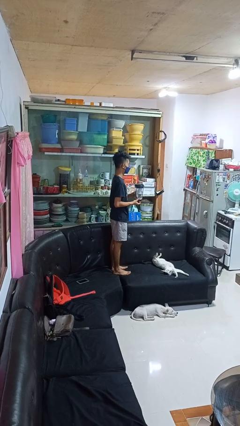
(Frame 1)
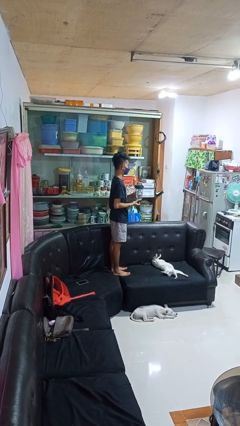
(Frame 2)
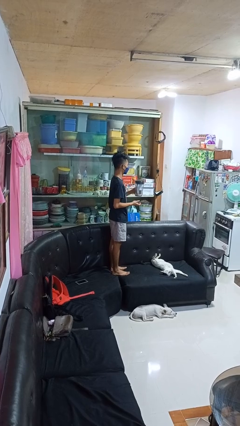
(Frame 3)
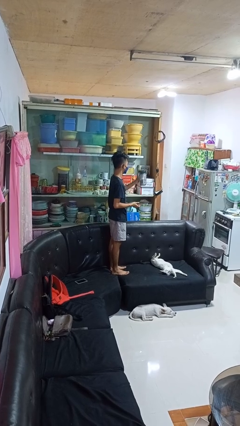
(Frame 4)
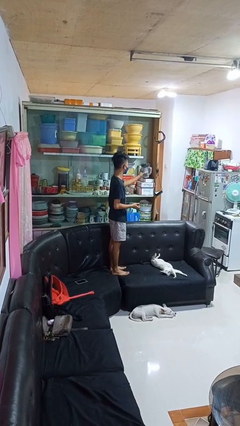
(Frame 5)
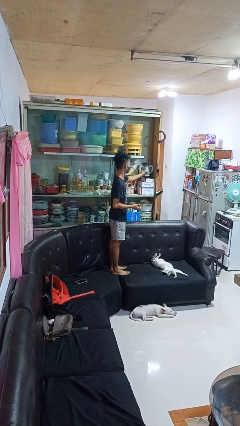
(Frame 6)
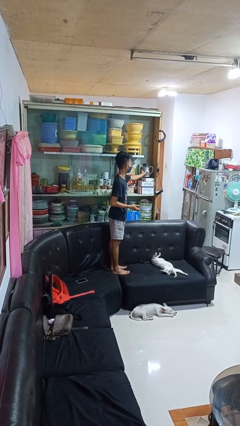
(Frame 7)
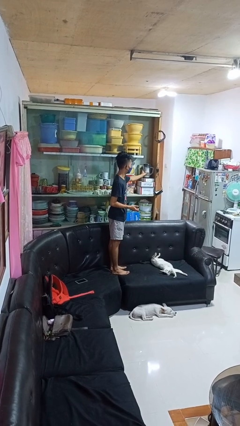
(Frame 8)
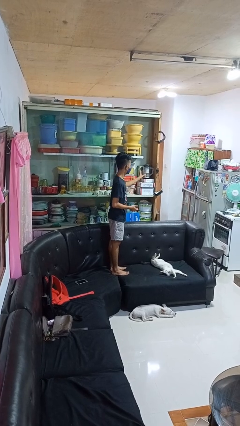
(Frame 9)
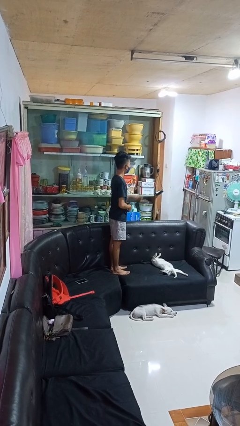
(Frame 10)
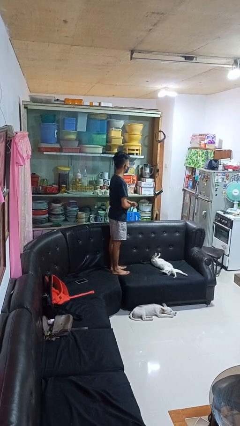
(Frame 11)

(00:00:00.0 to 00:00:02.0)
person puts down object into cabinet

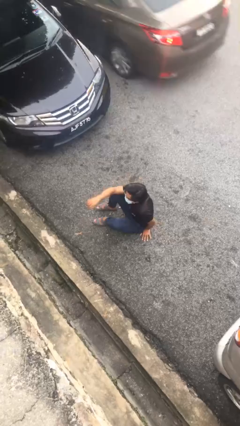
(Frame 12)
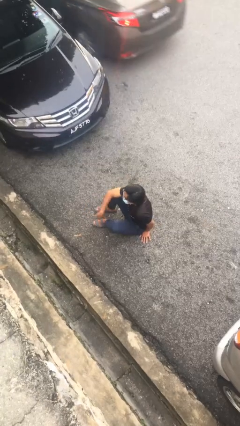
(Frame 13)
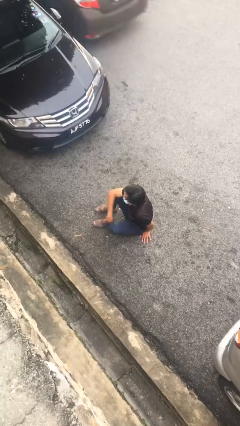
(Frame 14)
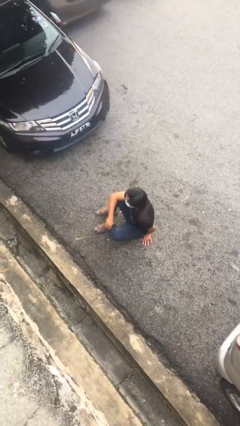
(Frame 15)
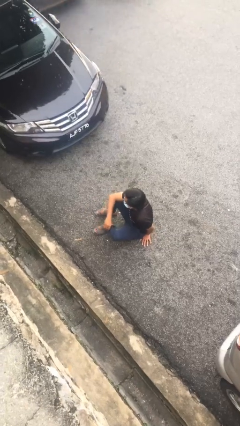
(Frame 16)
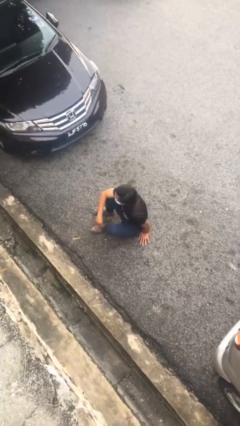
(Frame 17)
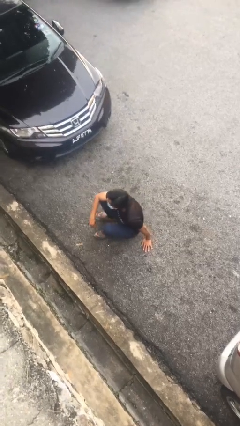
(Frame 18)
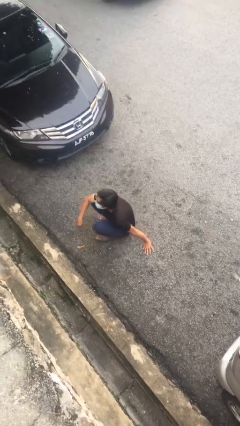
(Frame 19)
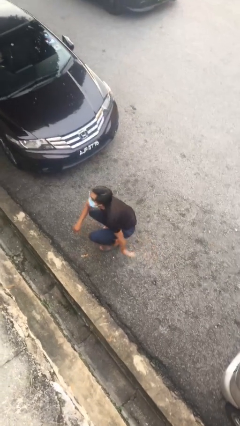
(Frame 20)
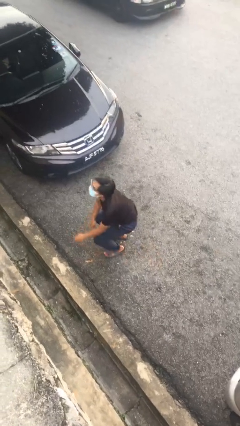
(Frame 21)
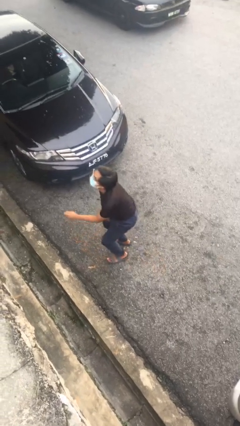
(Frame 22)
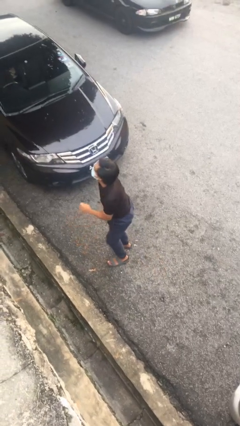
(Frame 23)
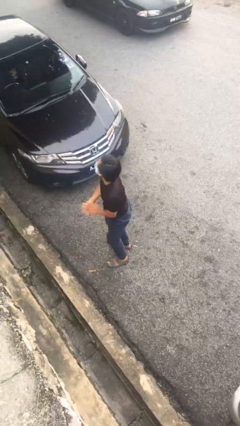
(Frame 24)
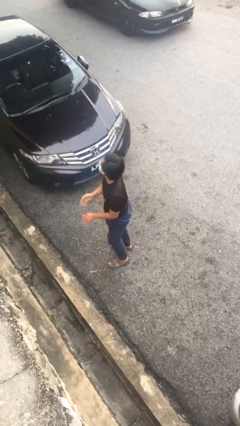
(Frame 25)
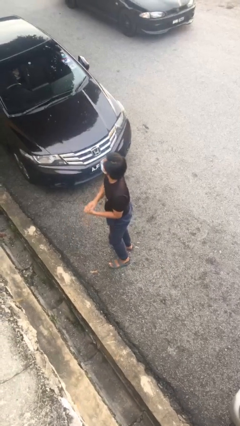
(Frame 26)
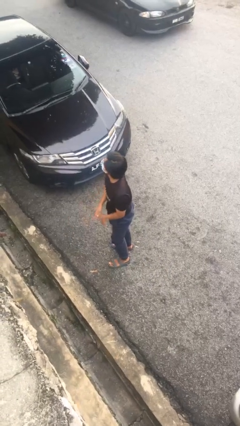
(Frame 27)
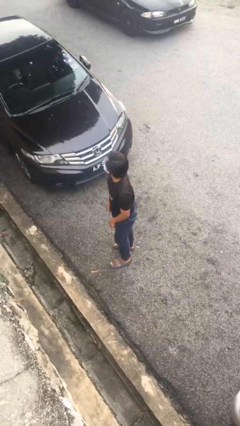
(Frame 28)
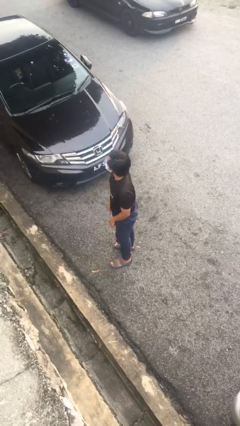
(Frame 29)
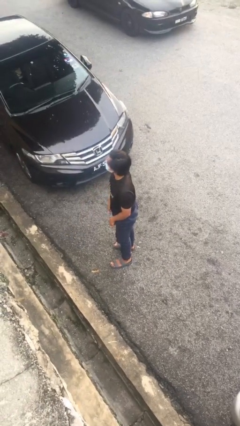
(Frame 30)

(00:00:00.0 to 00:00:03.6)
person stands up

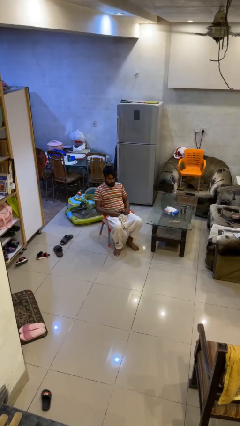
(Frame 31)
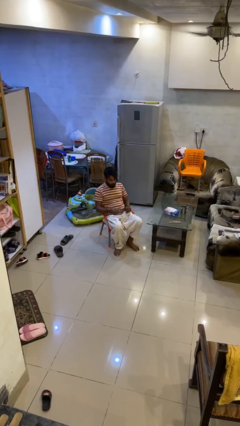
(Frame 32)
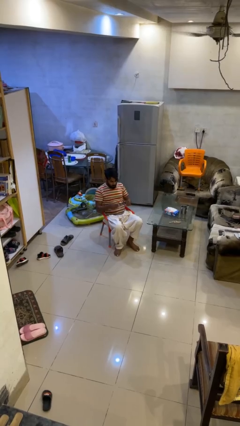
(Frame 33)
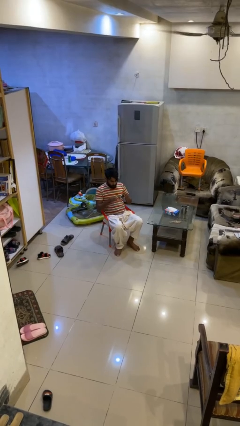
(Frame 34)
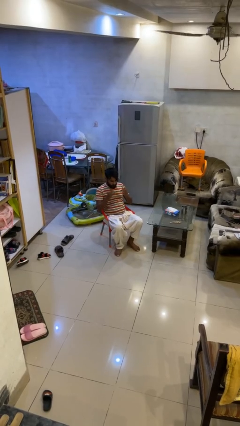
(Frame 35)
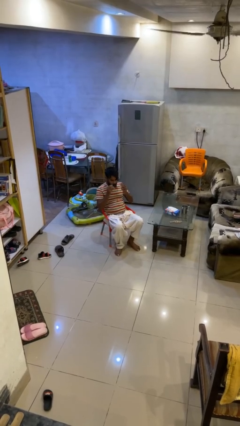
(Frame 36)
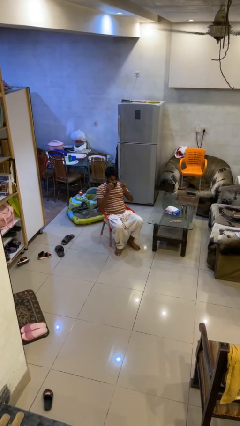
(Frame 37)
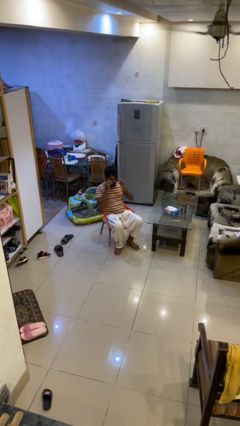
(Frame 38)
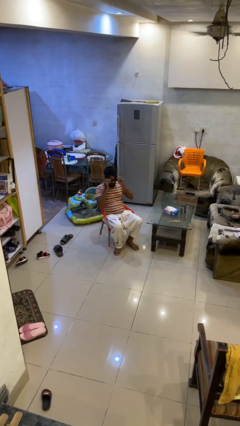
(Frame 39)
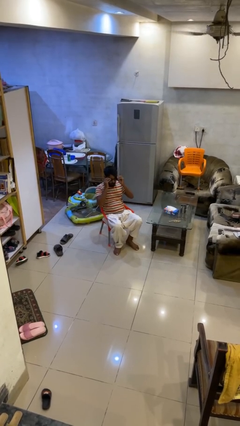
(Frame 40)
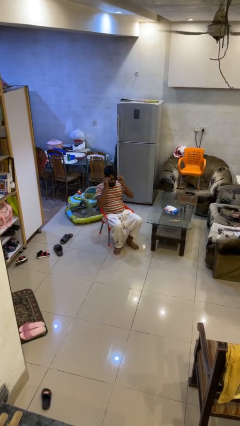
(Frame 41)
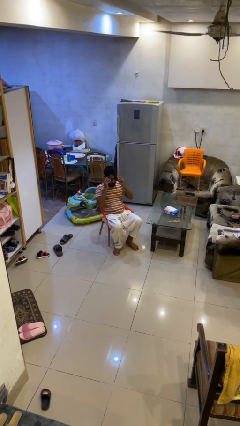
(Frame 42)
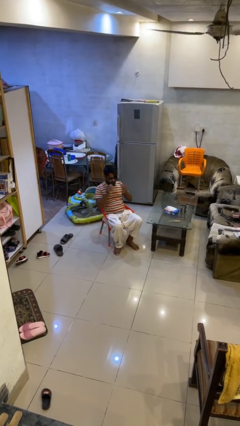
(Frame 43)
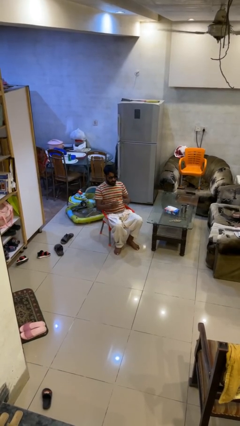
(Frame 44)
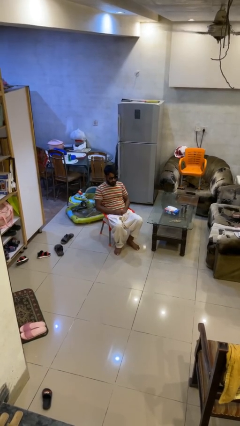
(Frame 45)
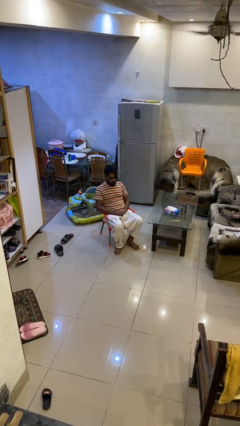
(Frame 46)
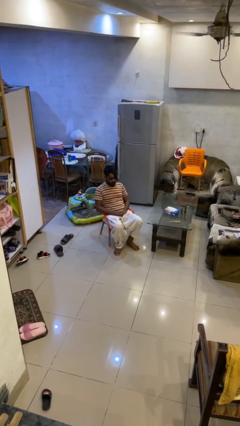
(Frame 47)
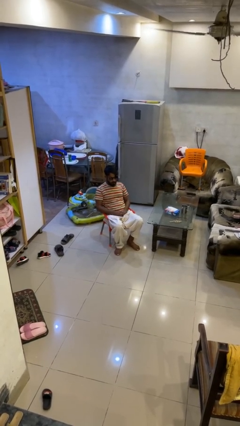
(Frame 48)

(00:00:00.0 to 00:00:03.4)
person puts on sunglasses

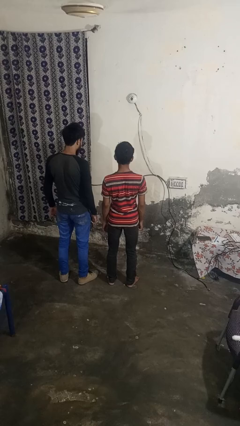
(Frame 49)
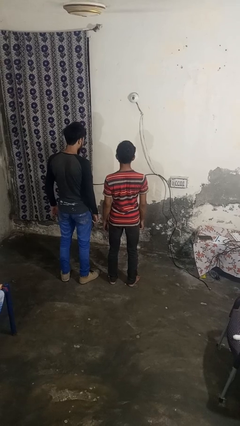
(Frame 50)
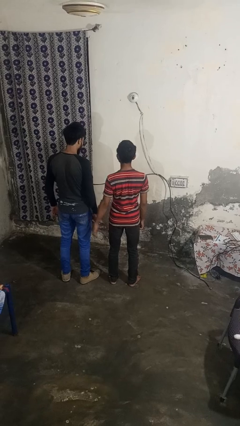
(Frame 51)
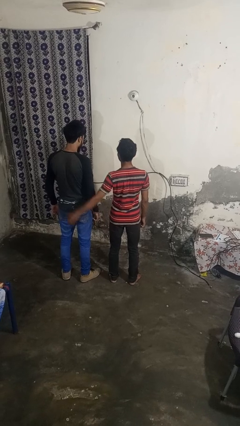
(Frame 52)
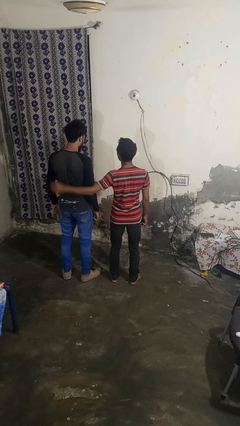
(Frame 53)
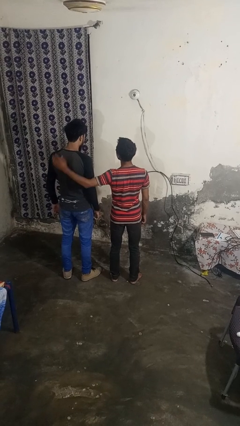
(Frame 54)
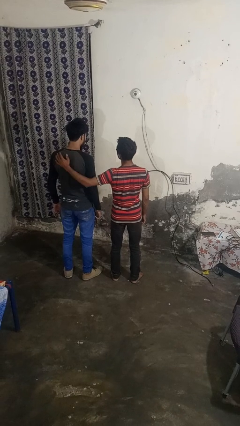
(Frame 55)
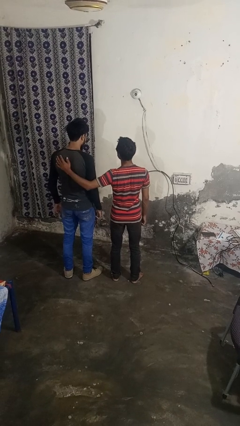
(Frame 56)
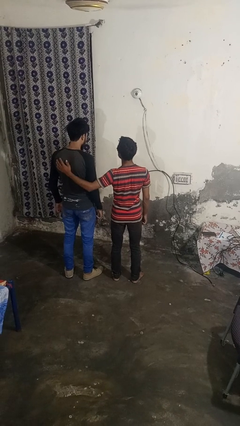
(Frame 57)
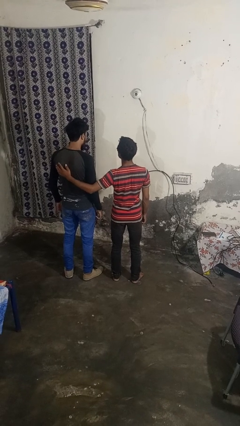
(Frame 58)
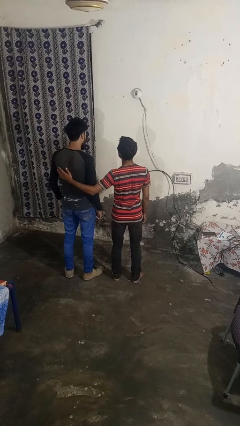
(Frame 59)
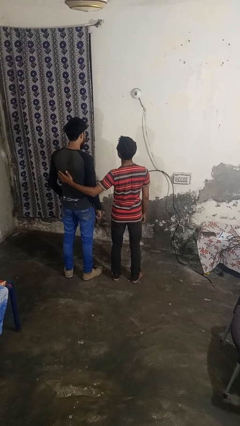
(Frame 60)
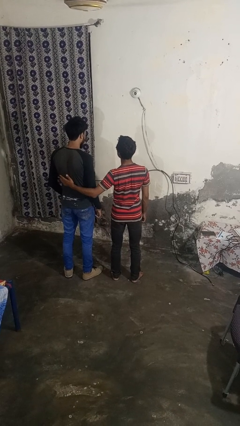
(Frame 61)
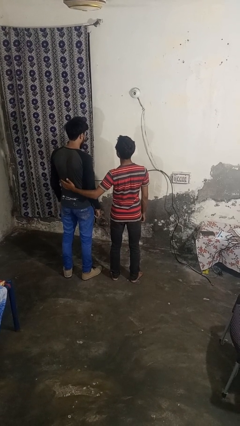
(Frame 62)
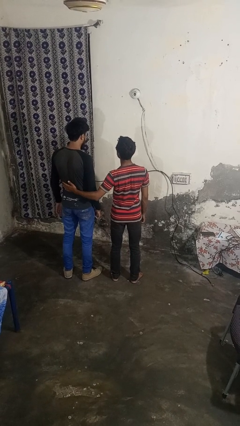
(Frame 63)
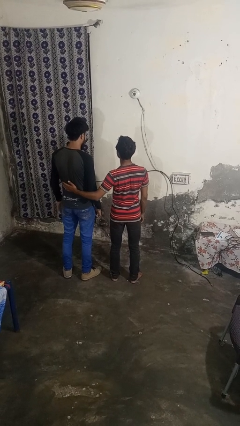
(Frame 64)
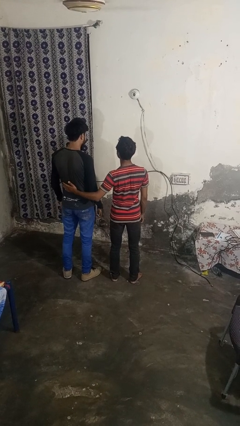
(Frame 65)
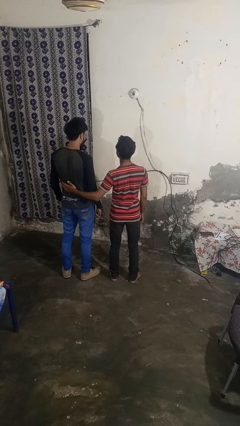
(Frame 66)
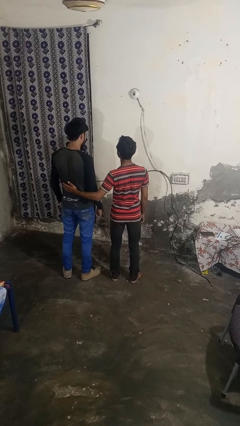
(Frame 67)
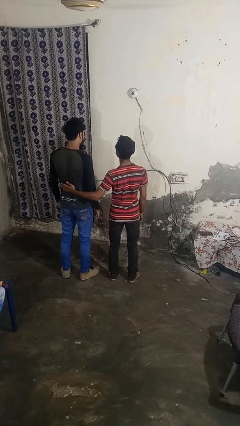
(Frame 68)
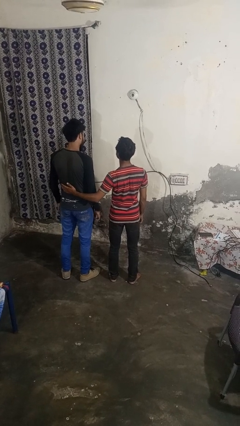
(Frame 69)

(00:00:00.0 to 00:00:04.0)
person touches back of person

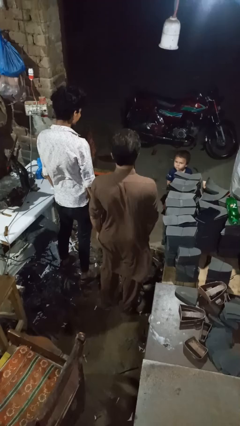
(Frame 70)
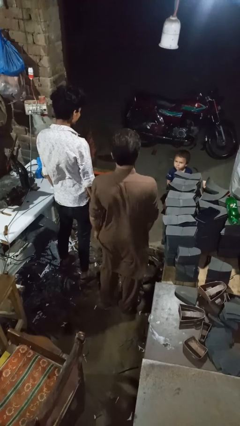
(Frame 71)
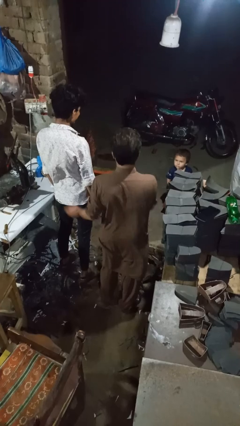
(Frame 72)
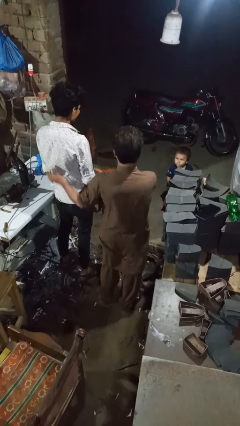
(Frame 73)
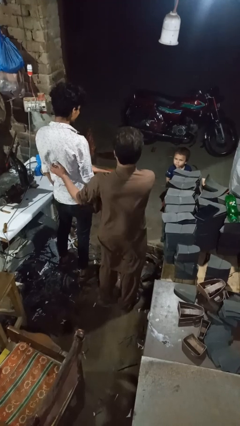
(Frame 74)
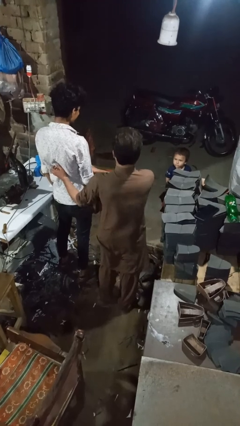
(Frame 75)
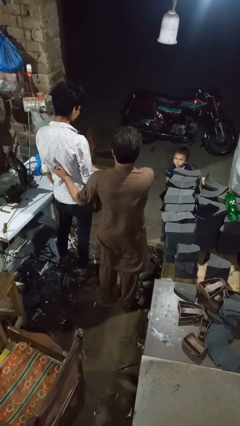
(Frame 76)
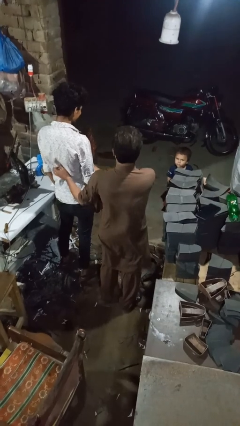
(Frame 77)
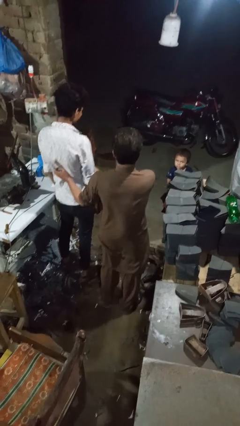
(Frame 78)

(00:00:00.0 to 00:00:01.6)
person tickles person

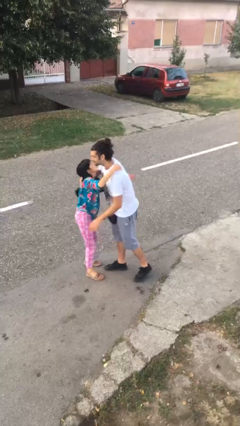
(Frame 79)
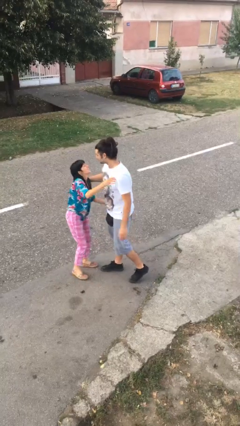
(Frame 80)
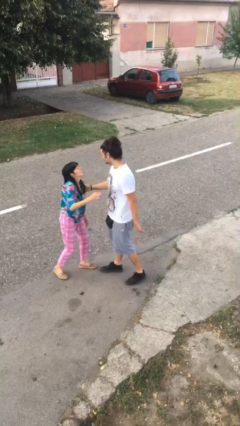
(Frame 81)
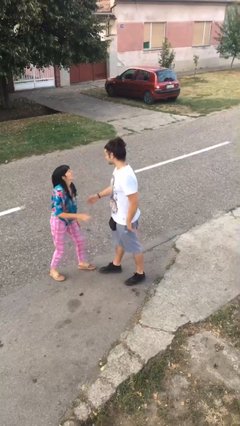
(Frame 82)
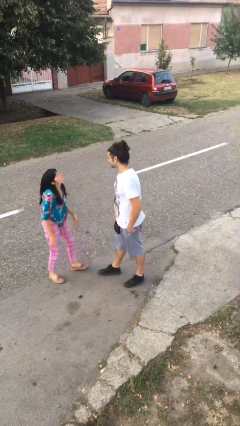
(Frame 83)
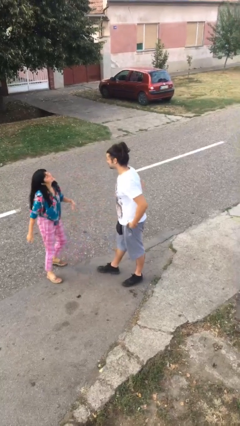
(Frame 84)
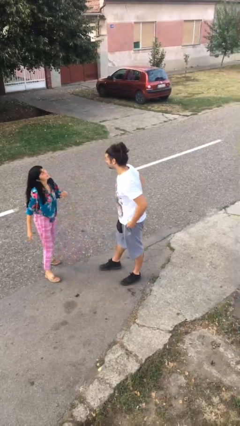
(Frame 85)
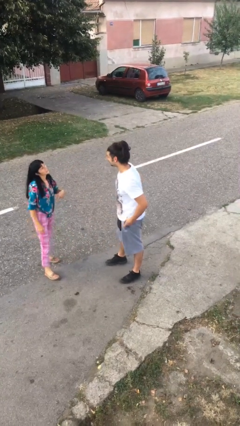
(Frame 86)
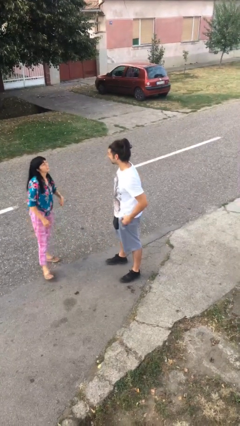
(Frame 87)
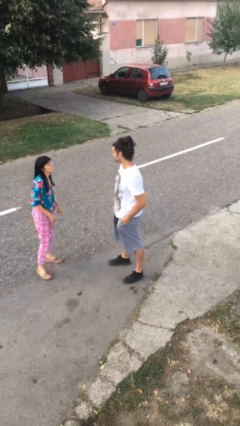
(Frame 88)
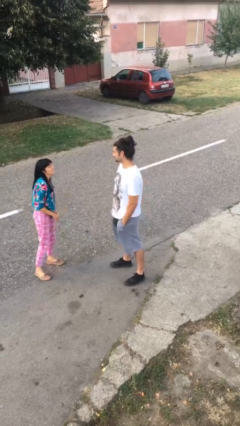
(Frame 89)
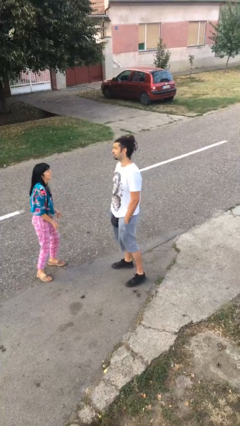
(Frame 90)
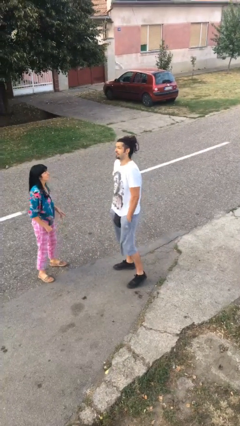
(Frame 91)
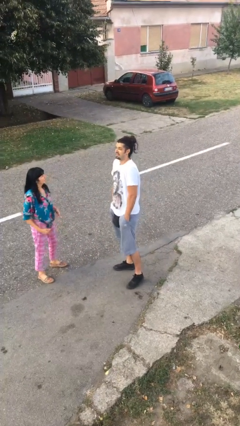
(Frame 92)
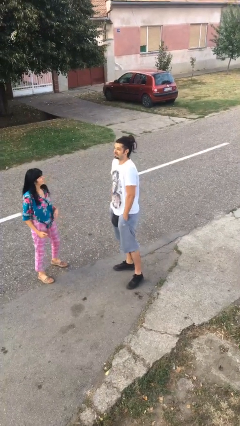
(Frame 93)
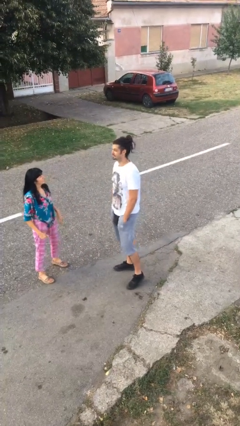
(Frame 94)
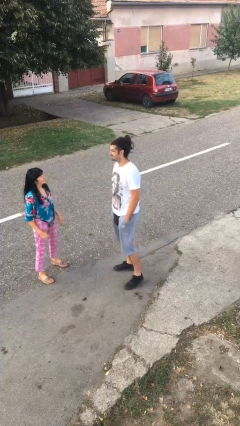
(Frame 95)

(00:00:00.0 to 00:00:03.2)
person talks to person
